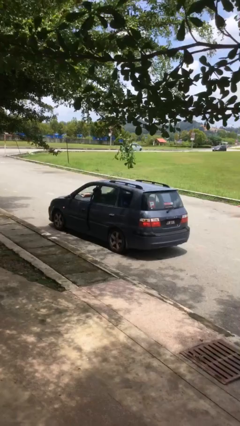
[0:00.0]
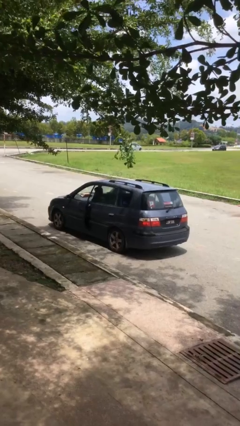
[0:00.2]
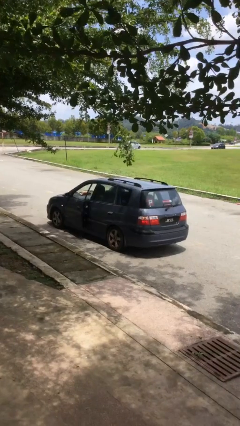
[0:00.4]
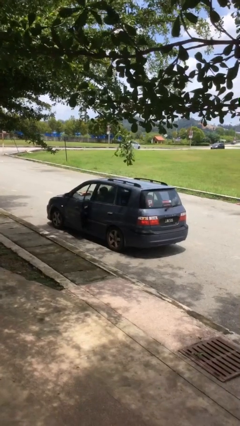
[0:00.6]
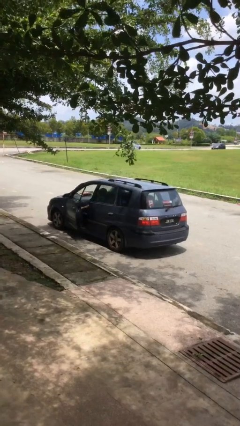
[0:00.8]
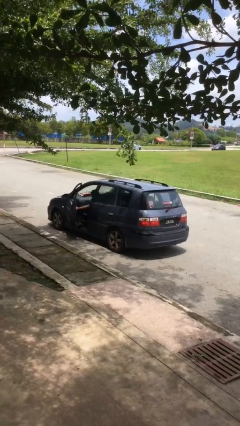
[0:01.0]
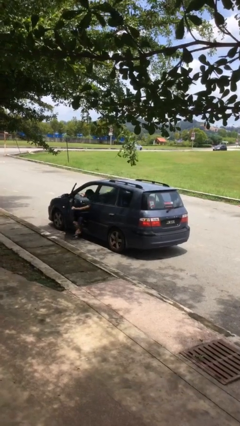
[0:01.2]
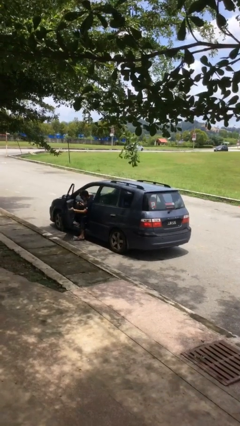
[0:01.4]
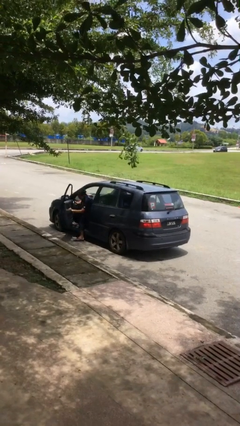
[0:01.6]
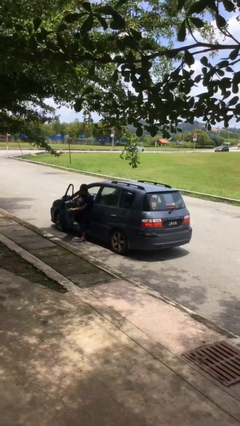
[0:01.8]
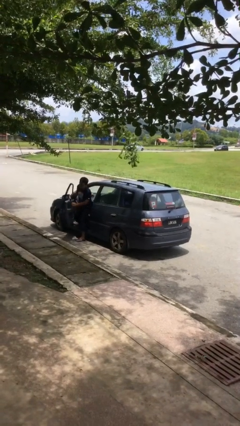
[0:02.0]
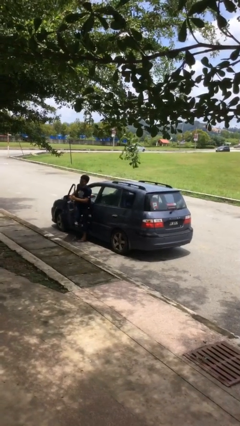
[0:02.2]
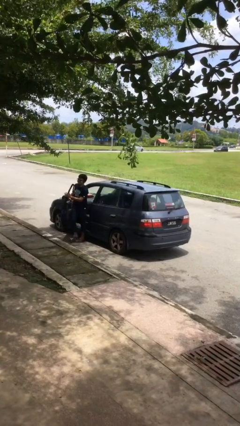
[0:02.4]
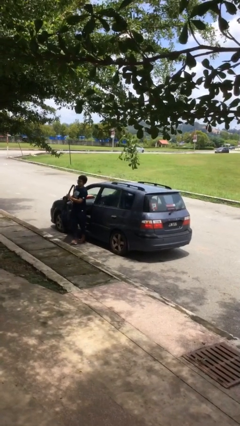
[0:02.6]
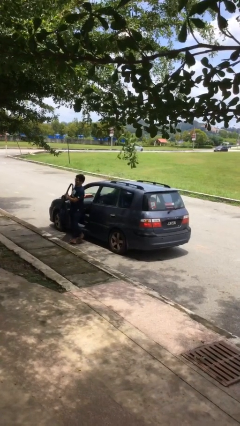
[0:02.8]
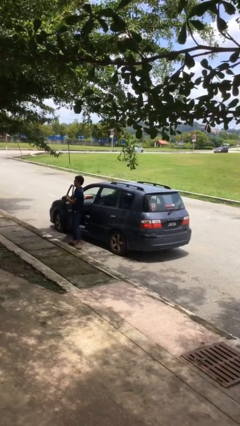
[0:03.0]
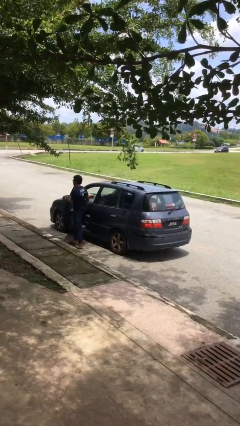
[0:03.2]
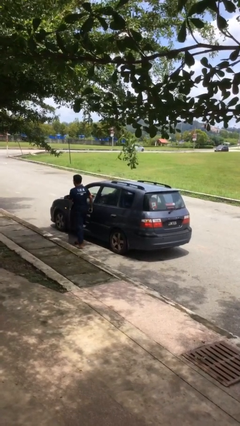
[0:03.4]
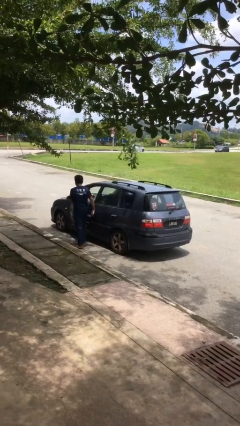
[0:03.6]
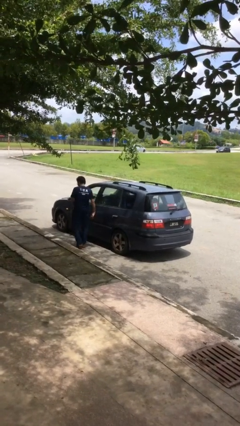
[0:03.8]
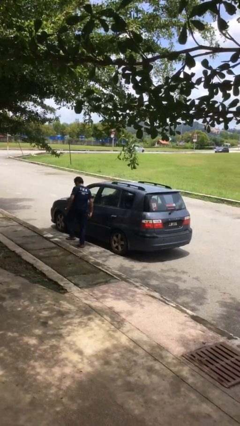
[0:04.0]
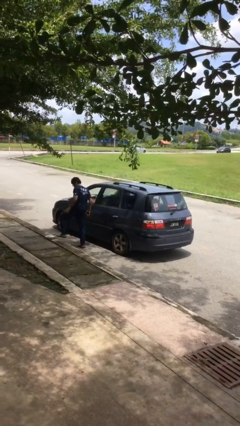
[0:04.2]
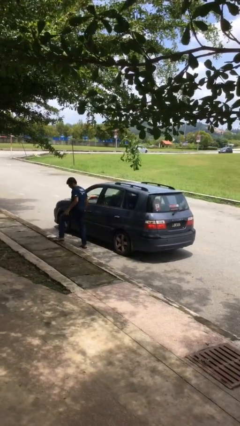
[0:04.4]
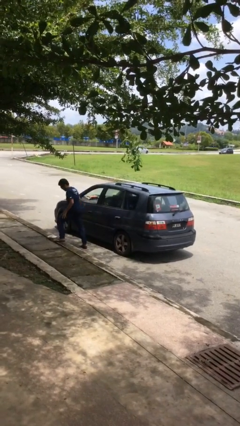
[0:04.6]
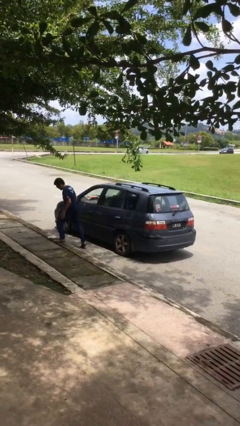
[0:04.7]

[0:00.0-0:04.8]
car drops off person

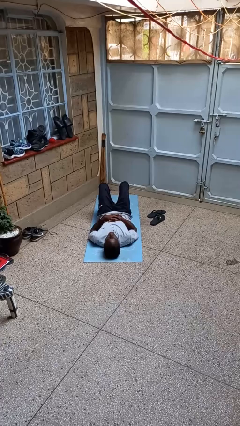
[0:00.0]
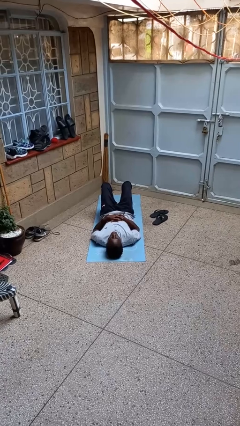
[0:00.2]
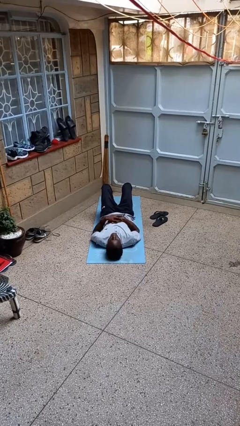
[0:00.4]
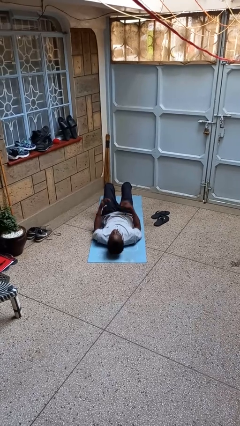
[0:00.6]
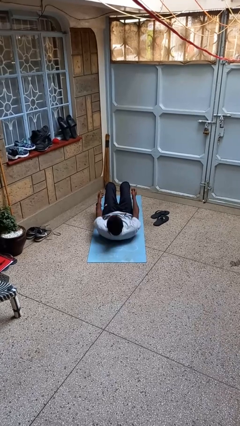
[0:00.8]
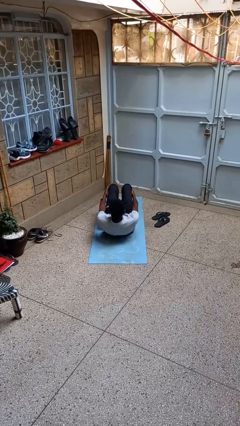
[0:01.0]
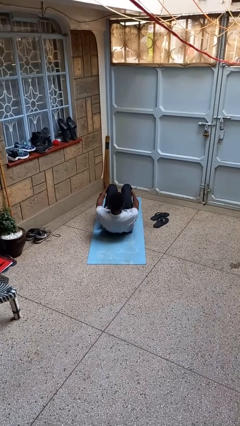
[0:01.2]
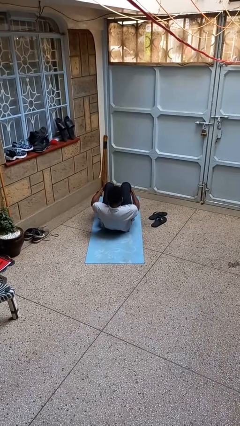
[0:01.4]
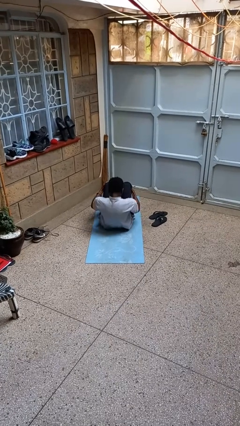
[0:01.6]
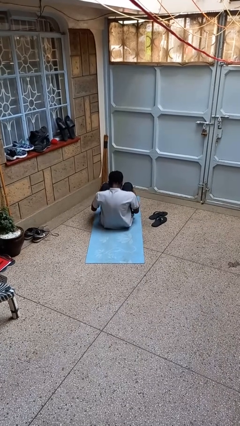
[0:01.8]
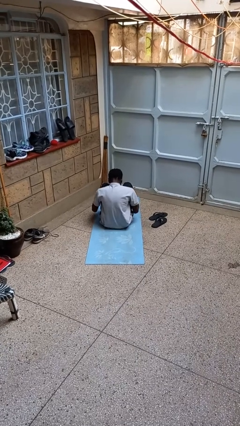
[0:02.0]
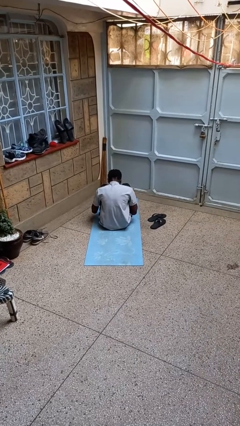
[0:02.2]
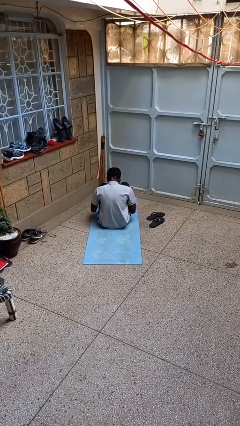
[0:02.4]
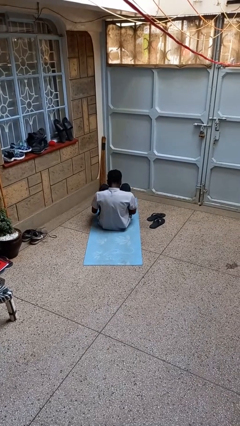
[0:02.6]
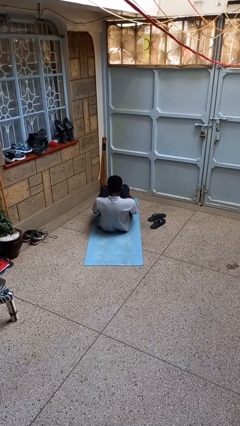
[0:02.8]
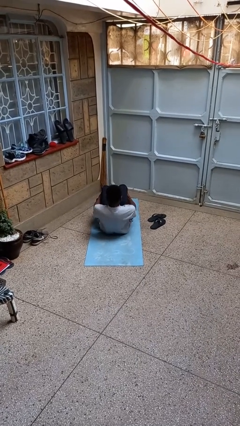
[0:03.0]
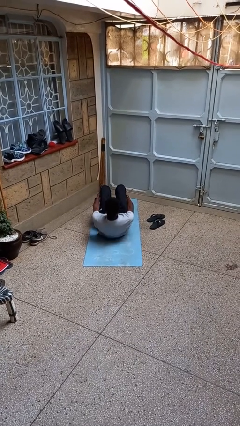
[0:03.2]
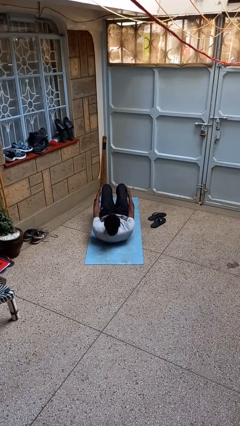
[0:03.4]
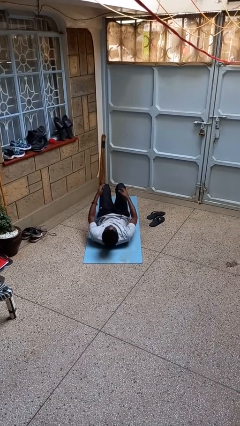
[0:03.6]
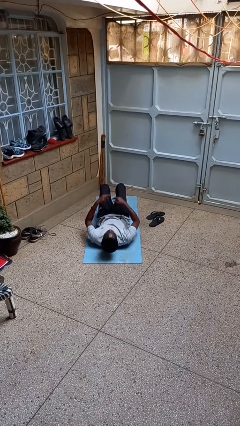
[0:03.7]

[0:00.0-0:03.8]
person exercises with pushup

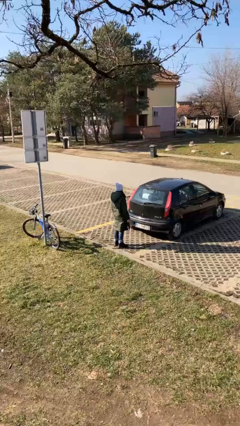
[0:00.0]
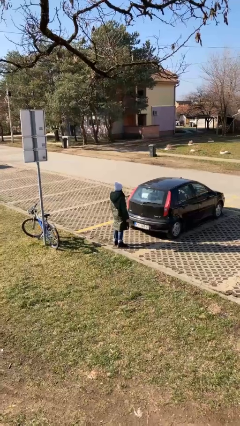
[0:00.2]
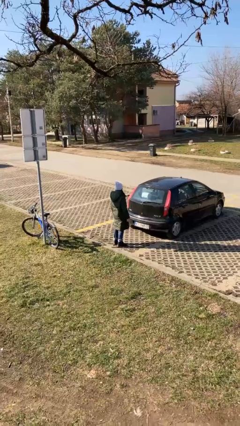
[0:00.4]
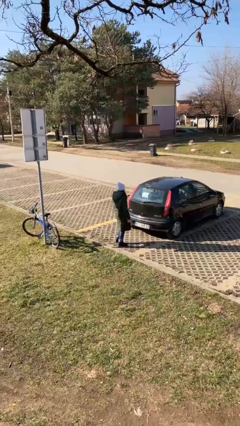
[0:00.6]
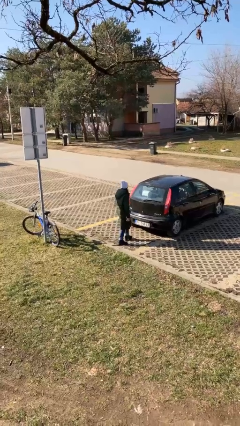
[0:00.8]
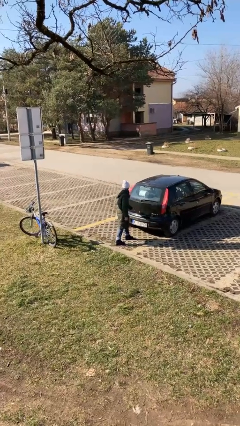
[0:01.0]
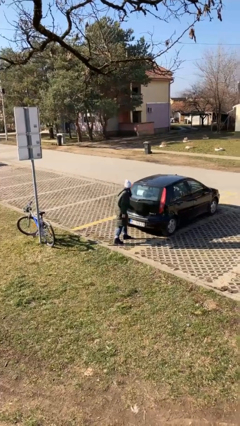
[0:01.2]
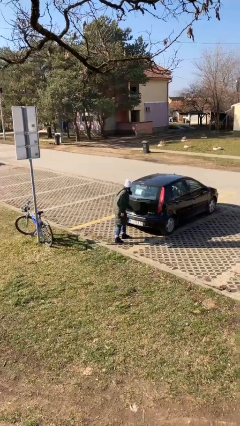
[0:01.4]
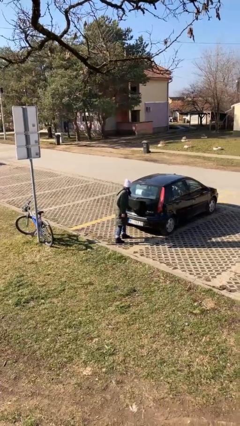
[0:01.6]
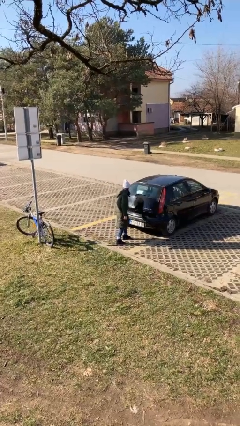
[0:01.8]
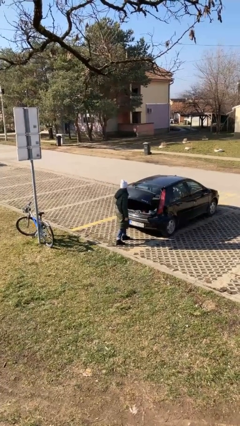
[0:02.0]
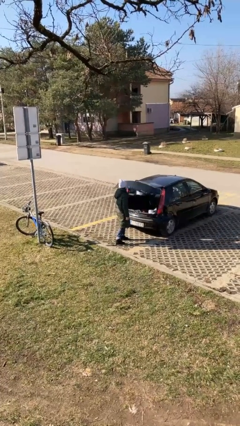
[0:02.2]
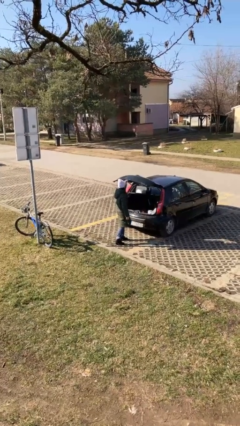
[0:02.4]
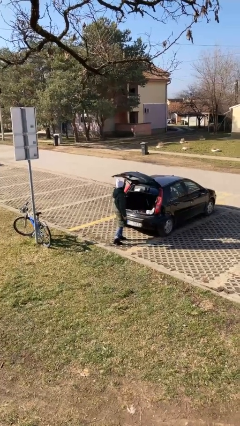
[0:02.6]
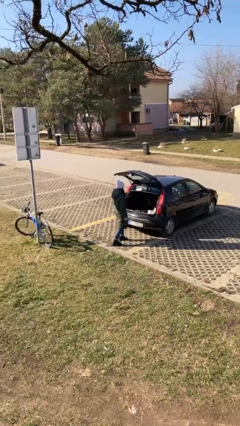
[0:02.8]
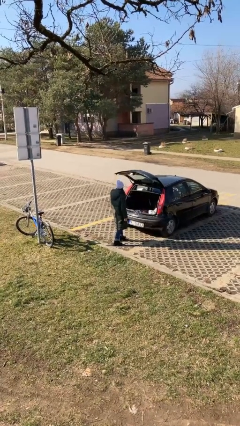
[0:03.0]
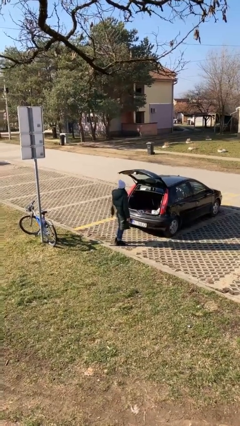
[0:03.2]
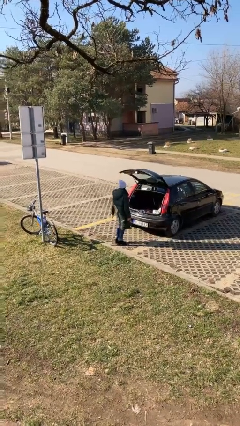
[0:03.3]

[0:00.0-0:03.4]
person opens car trunk

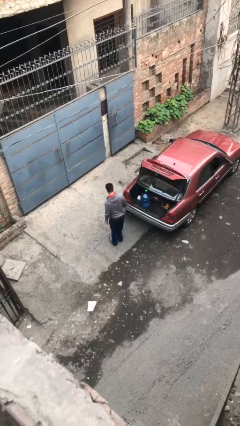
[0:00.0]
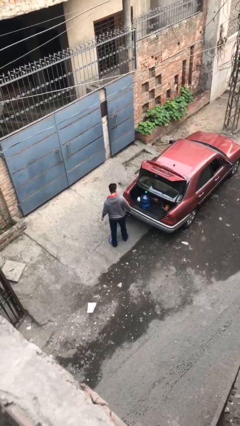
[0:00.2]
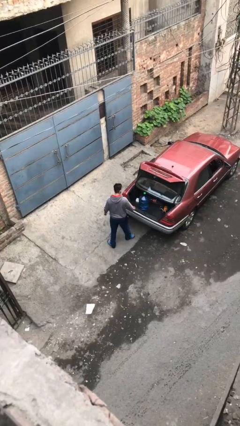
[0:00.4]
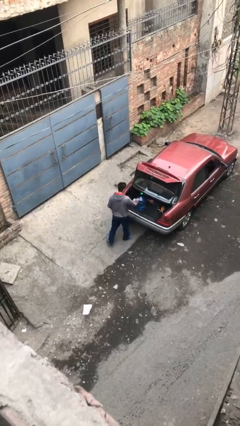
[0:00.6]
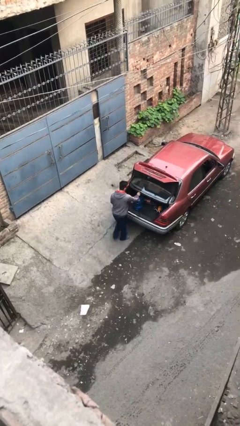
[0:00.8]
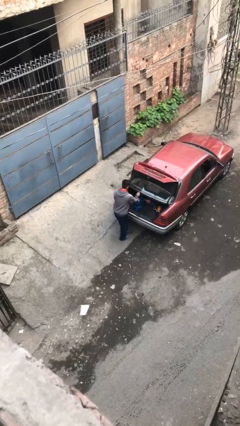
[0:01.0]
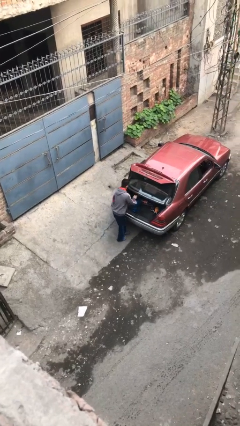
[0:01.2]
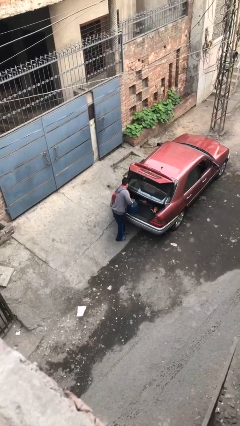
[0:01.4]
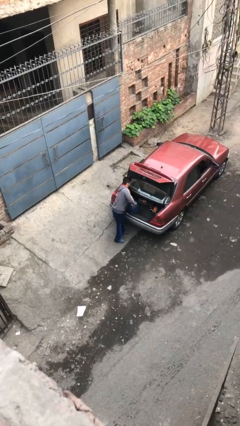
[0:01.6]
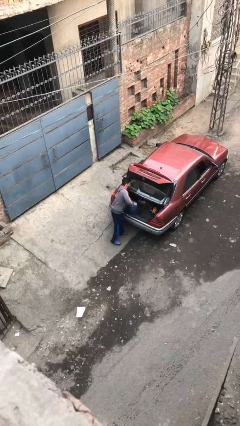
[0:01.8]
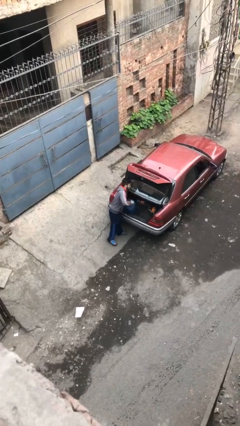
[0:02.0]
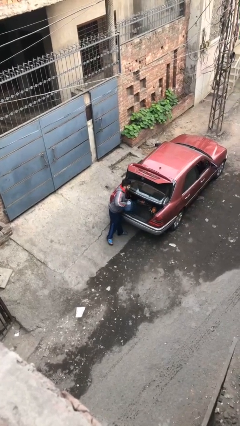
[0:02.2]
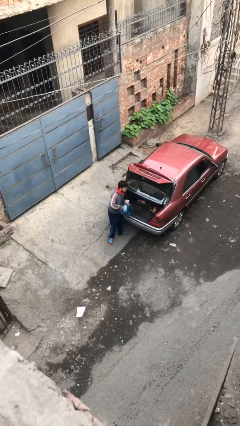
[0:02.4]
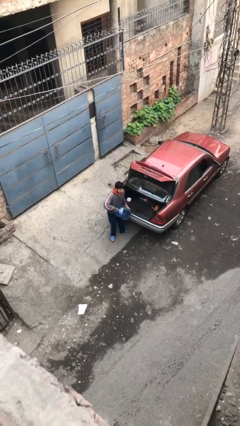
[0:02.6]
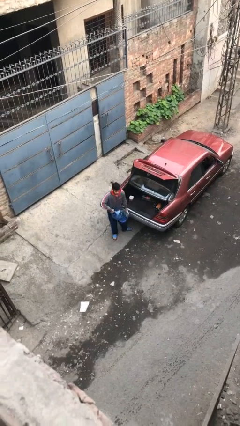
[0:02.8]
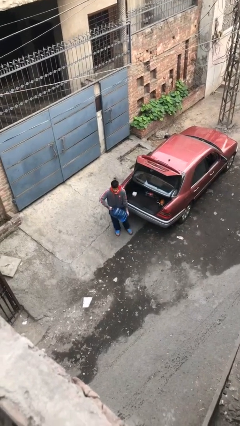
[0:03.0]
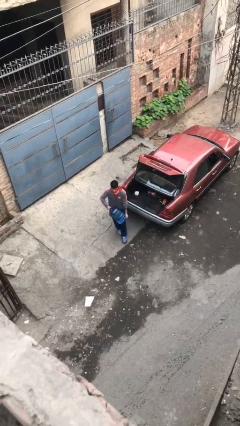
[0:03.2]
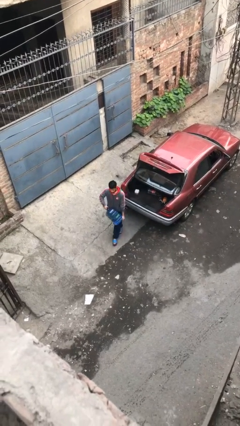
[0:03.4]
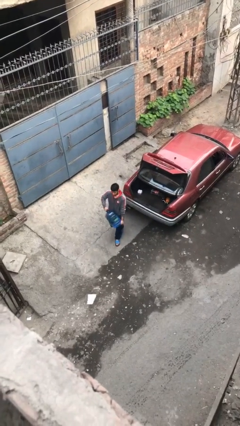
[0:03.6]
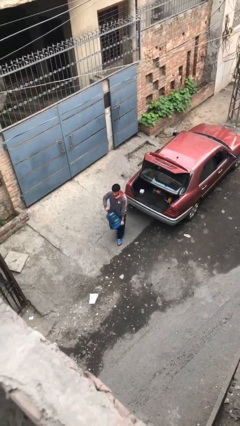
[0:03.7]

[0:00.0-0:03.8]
person unloads car

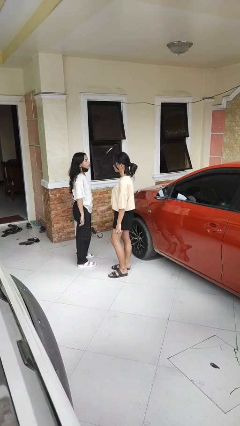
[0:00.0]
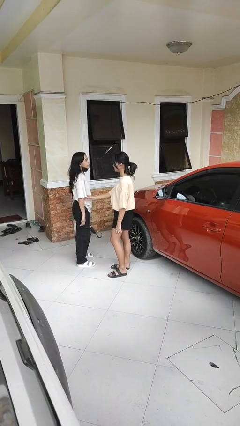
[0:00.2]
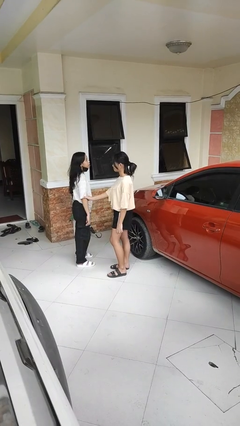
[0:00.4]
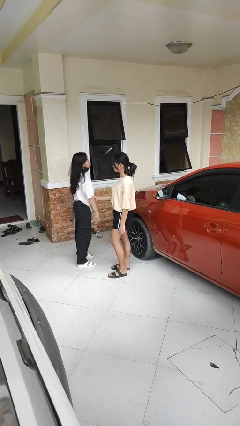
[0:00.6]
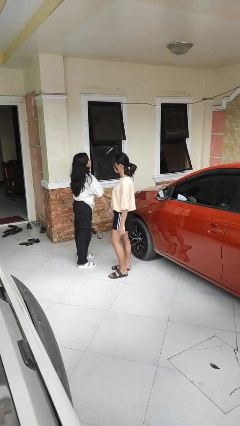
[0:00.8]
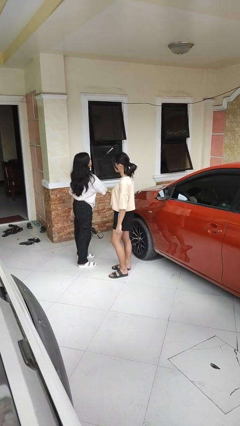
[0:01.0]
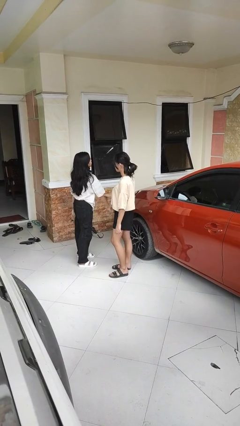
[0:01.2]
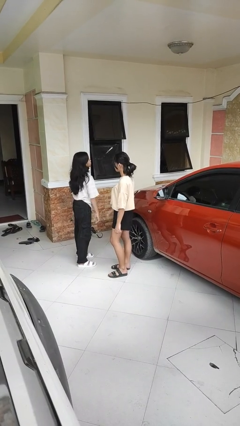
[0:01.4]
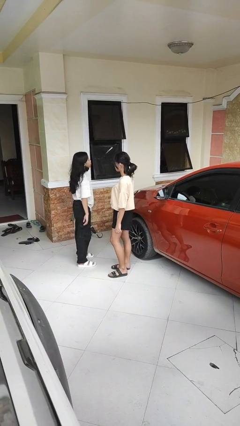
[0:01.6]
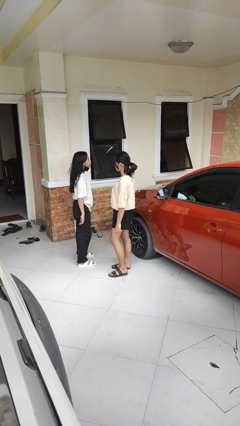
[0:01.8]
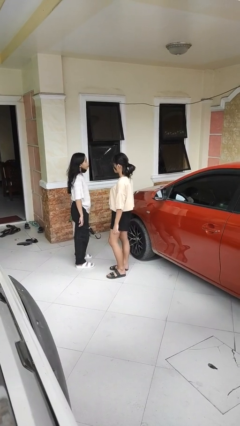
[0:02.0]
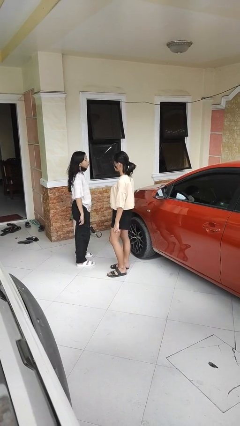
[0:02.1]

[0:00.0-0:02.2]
person grabs person by forearm
